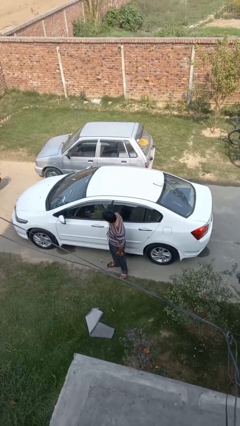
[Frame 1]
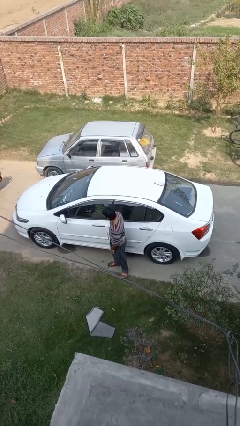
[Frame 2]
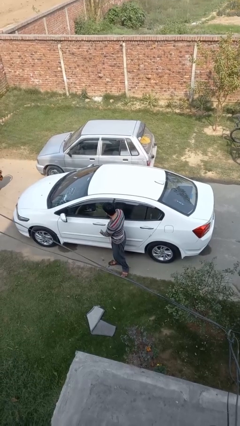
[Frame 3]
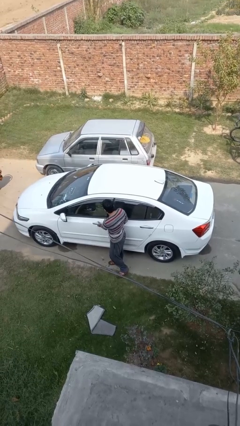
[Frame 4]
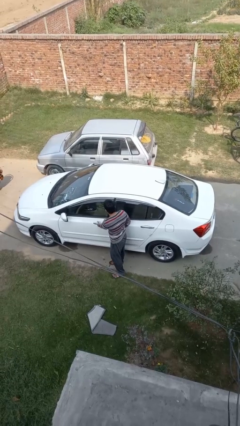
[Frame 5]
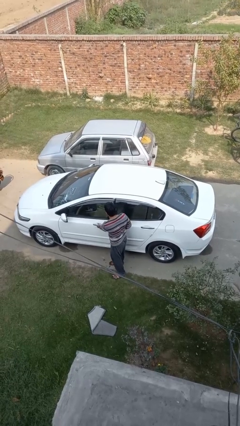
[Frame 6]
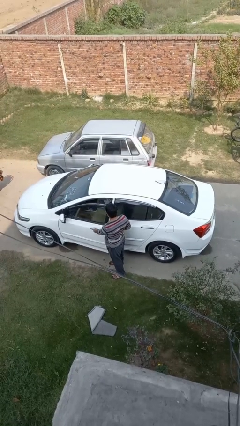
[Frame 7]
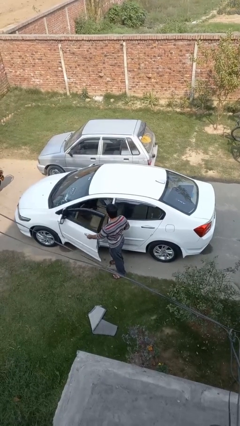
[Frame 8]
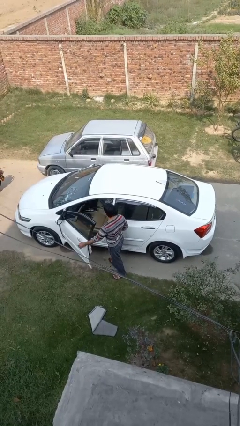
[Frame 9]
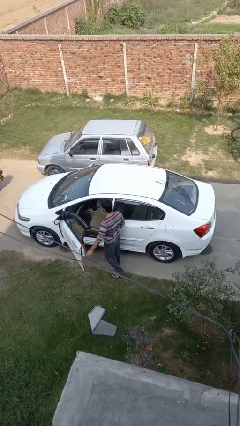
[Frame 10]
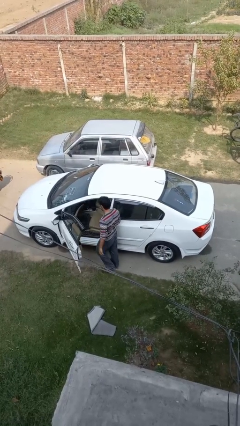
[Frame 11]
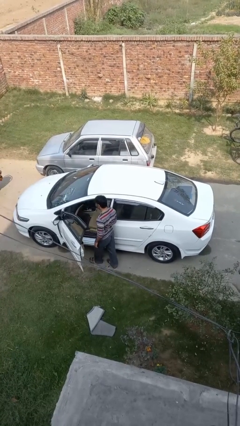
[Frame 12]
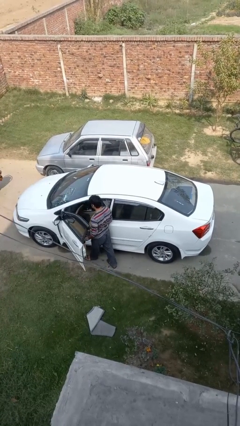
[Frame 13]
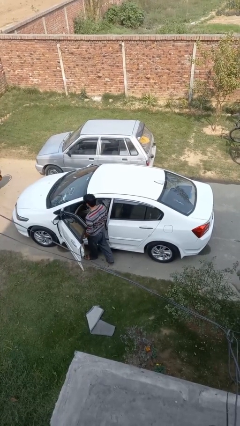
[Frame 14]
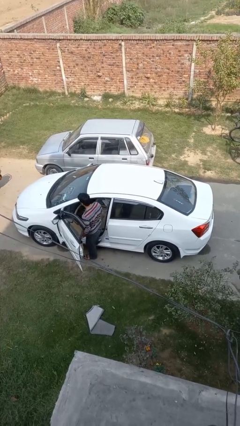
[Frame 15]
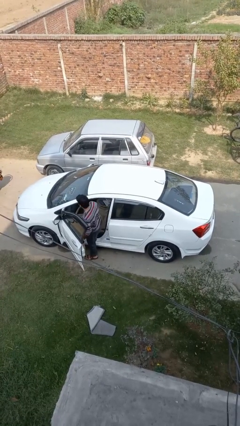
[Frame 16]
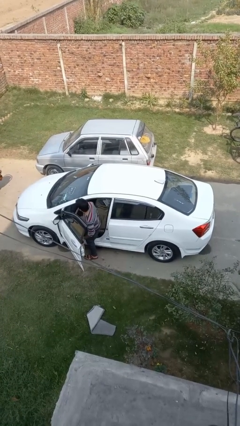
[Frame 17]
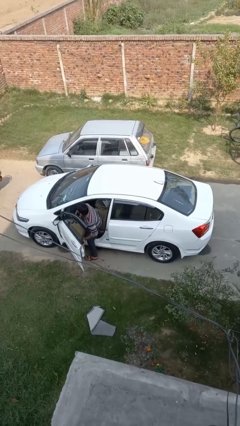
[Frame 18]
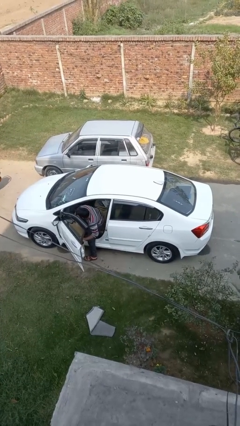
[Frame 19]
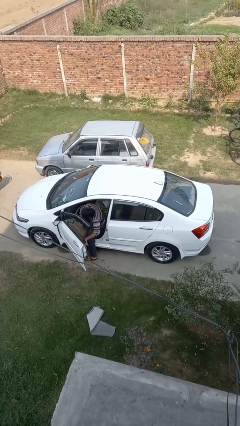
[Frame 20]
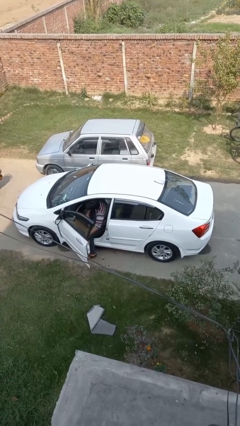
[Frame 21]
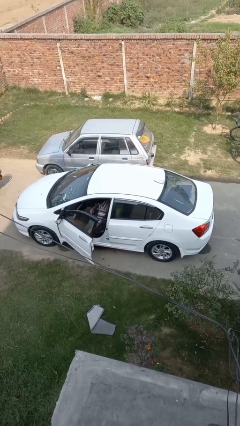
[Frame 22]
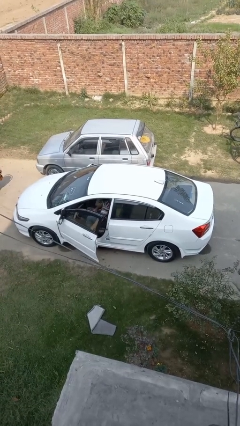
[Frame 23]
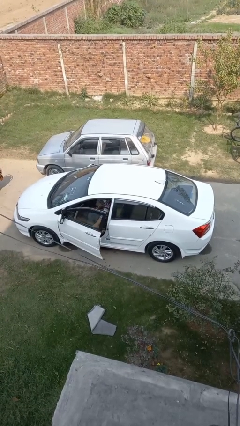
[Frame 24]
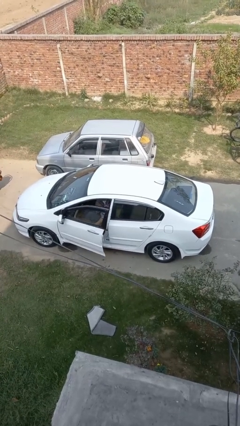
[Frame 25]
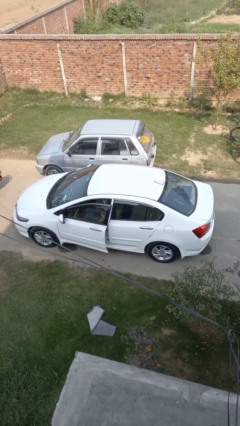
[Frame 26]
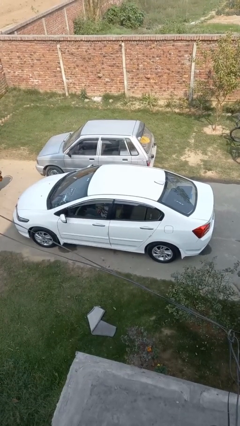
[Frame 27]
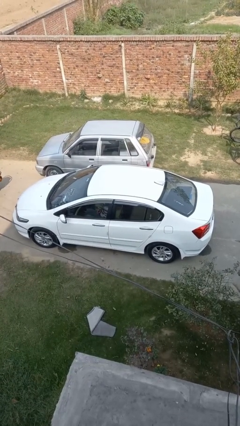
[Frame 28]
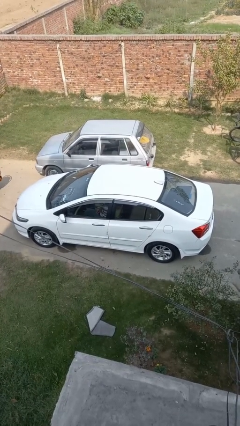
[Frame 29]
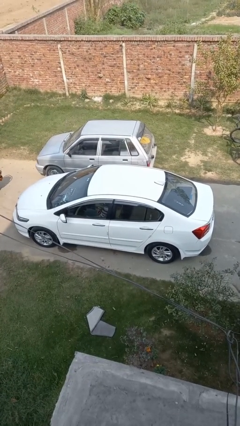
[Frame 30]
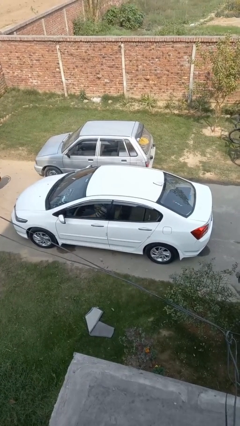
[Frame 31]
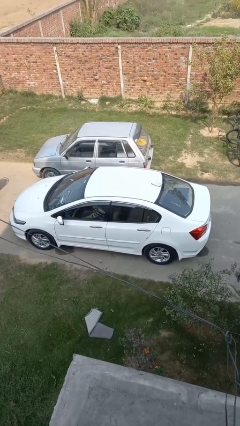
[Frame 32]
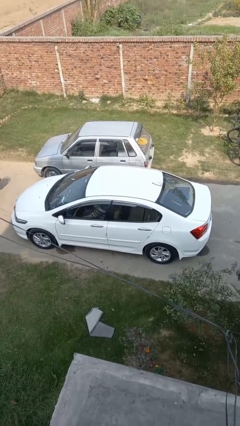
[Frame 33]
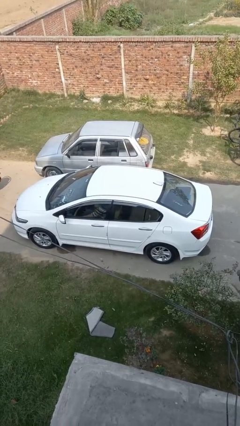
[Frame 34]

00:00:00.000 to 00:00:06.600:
car picks up person

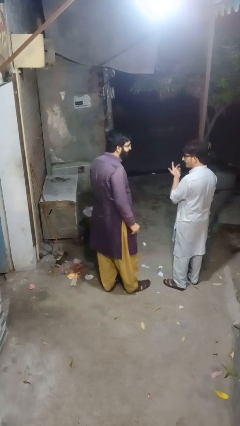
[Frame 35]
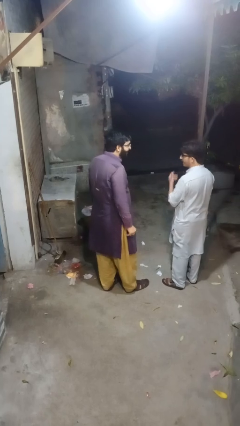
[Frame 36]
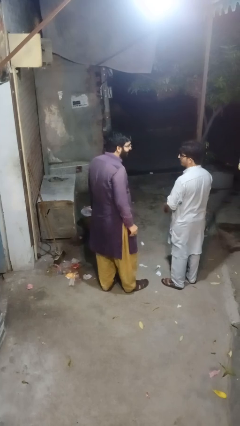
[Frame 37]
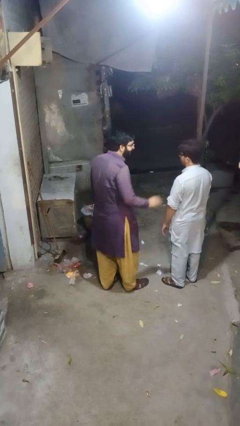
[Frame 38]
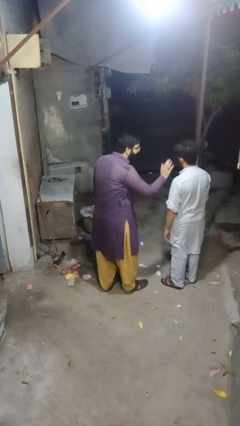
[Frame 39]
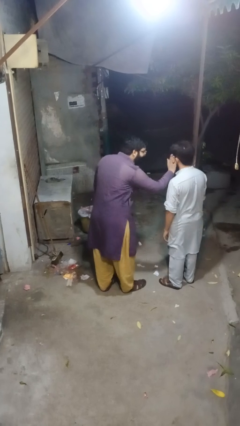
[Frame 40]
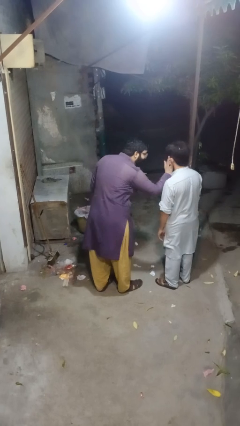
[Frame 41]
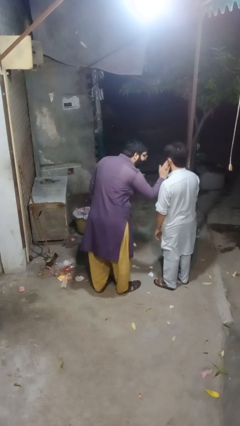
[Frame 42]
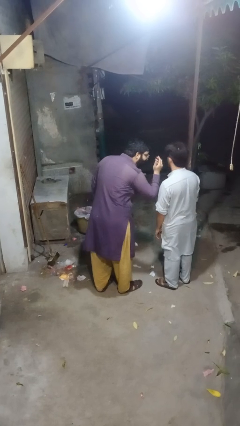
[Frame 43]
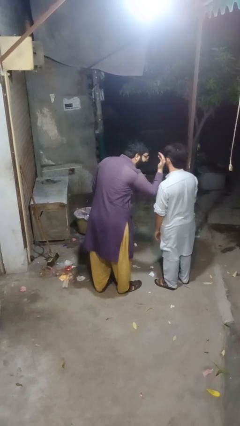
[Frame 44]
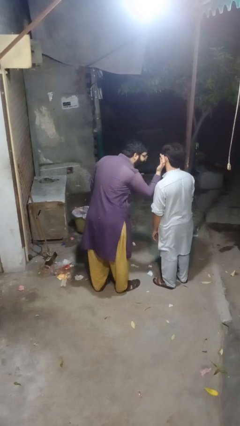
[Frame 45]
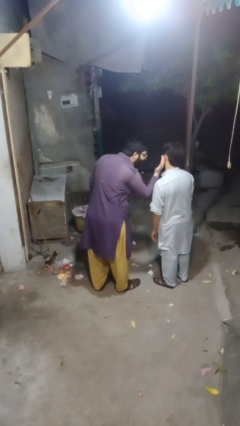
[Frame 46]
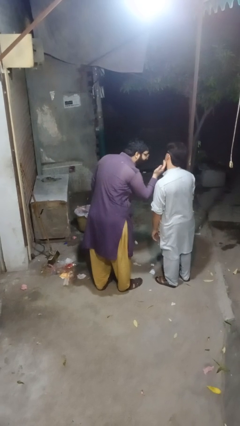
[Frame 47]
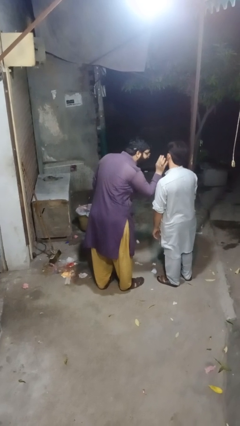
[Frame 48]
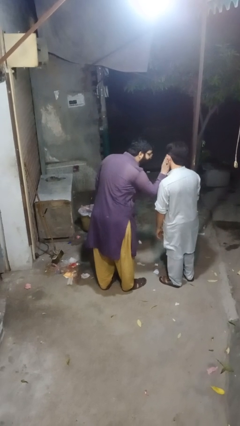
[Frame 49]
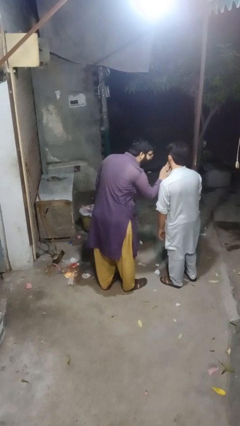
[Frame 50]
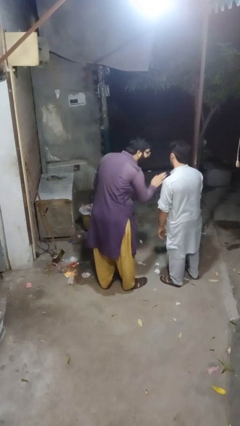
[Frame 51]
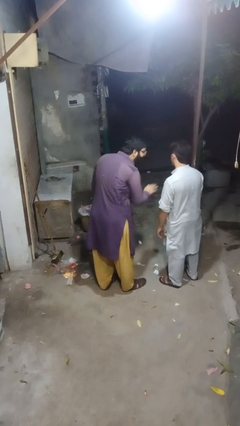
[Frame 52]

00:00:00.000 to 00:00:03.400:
person touches face of person

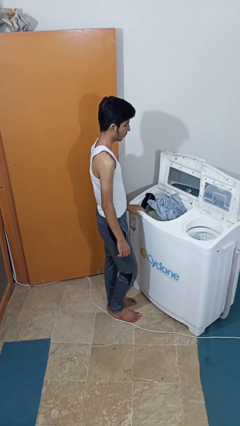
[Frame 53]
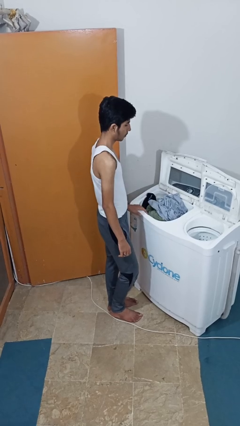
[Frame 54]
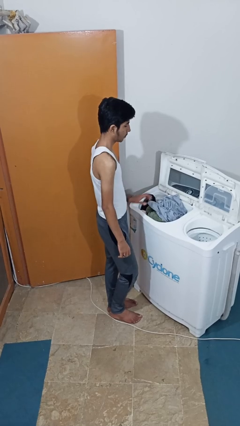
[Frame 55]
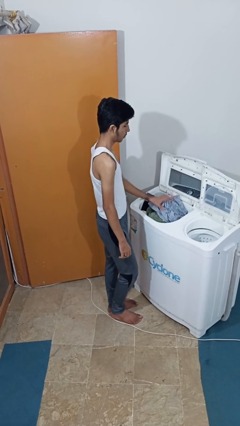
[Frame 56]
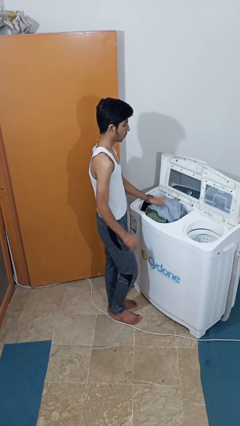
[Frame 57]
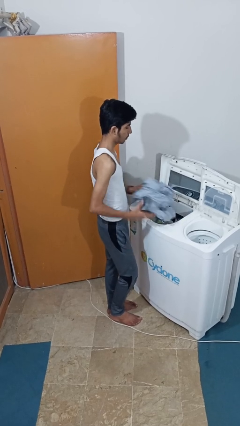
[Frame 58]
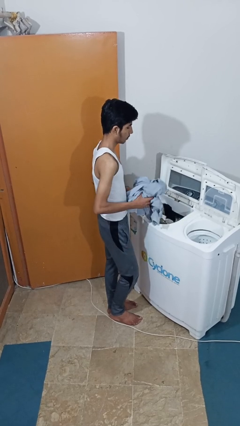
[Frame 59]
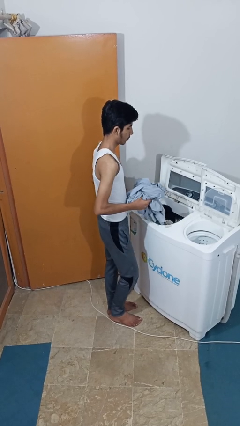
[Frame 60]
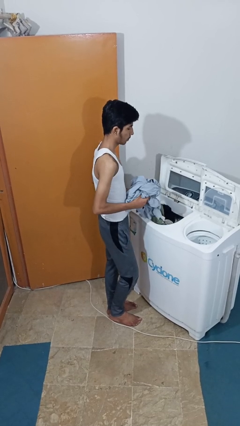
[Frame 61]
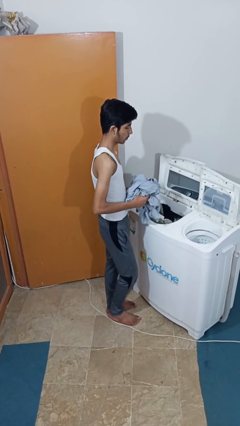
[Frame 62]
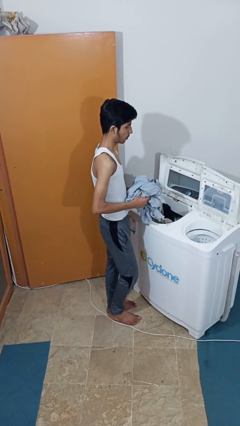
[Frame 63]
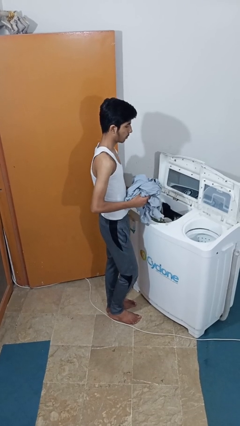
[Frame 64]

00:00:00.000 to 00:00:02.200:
person unloads clotheswasher

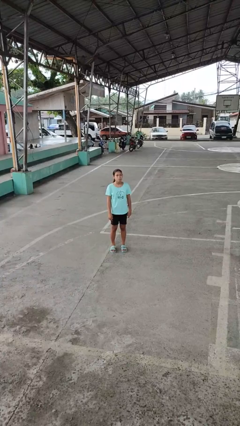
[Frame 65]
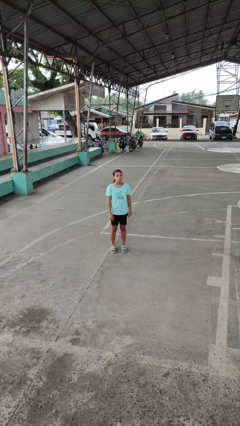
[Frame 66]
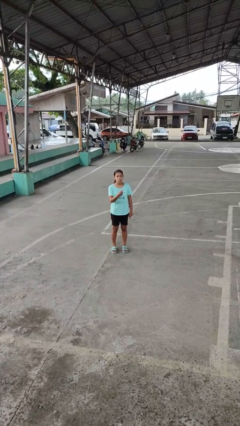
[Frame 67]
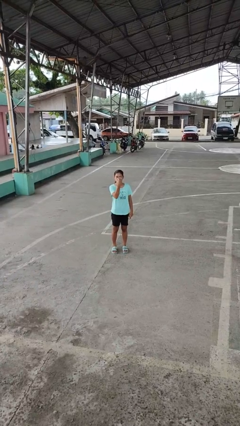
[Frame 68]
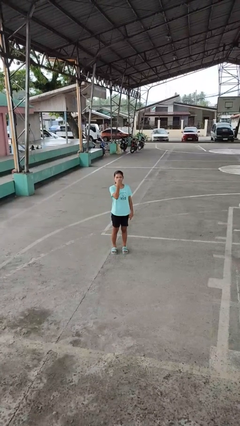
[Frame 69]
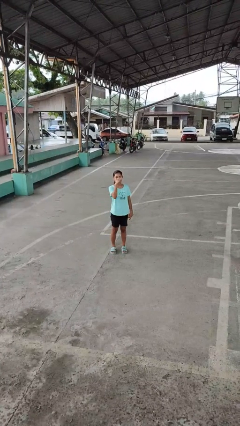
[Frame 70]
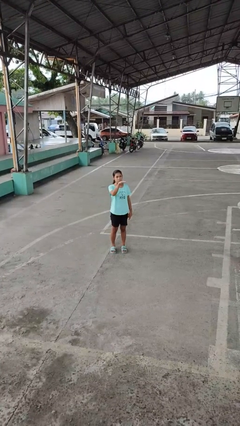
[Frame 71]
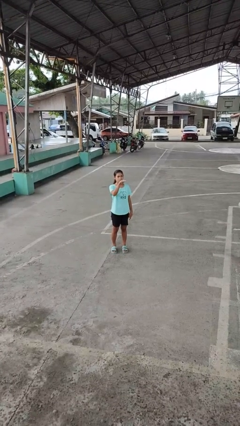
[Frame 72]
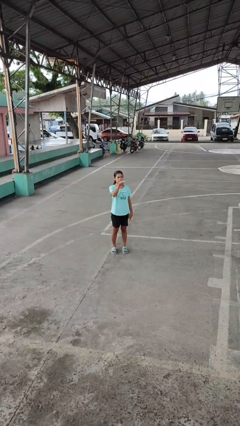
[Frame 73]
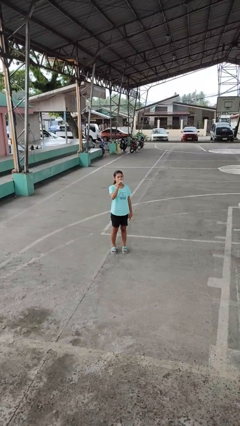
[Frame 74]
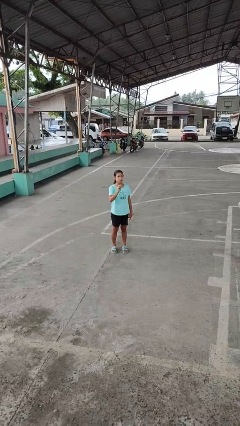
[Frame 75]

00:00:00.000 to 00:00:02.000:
person gestures watch closely

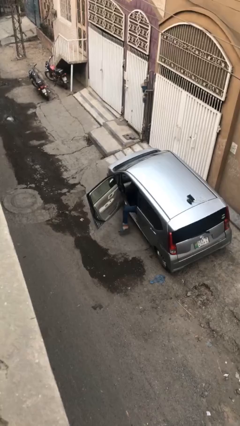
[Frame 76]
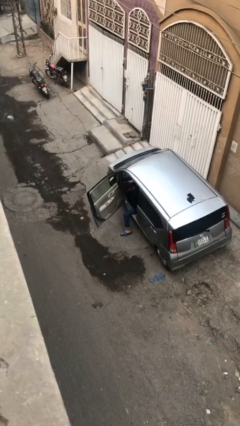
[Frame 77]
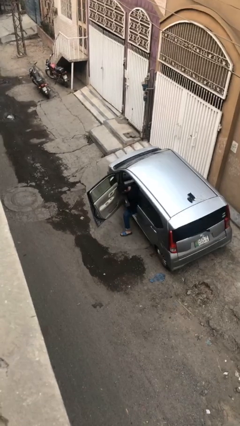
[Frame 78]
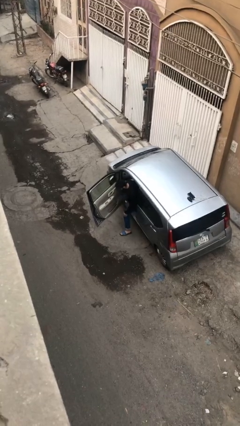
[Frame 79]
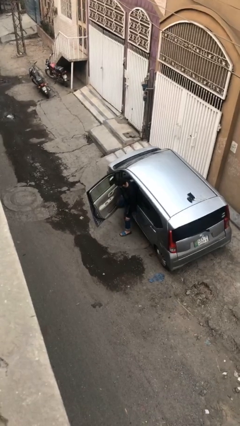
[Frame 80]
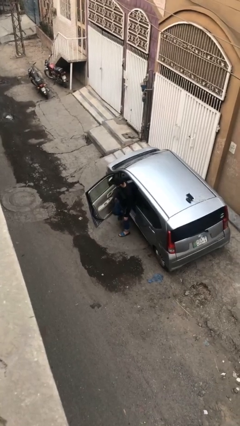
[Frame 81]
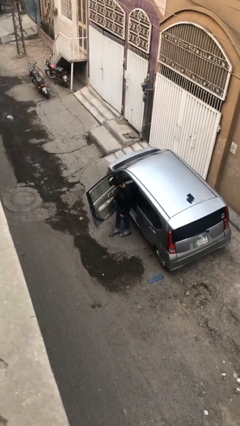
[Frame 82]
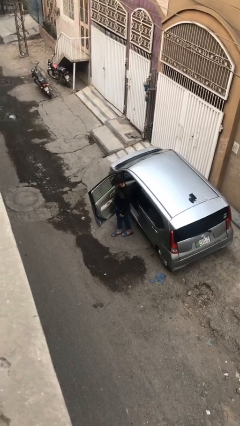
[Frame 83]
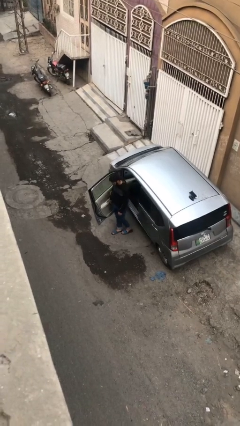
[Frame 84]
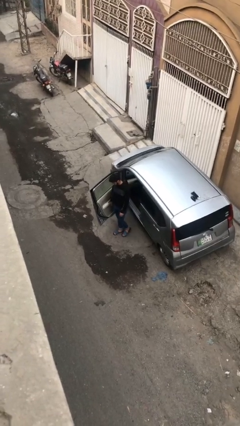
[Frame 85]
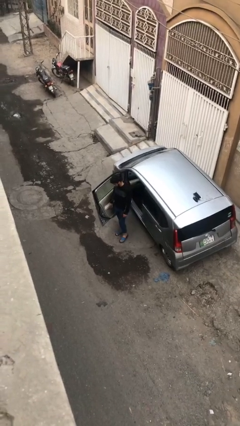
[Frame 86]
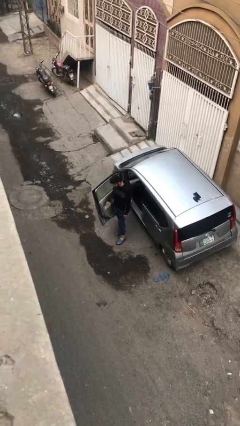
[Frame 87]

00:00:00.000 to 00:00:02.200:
person exits car

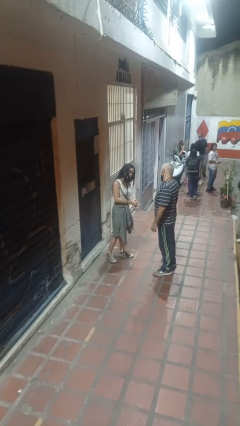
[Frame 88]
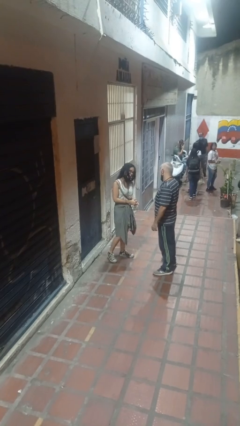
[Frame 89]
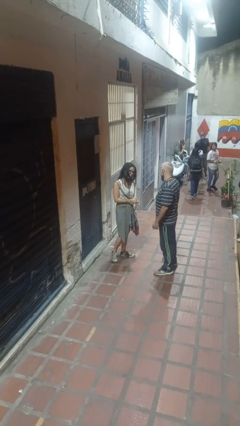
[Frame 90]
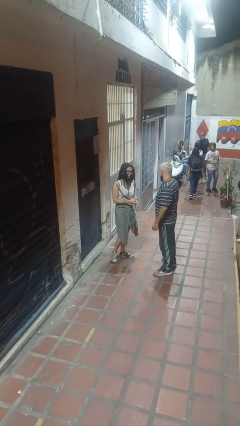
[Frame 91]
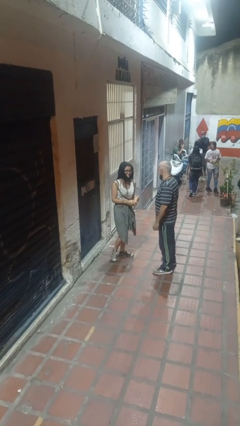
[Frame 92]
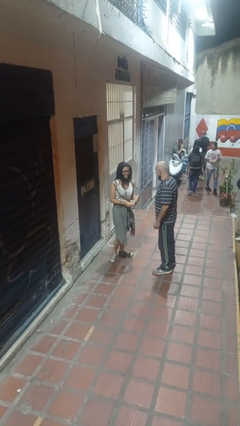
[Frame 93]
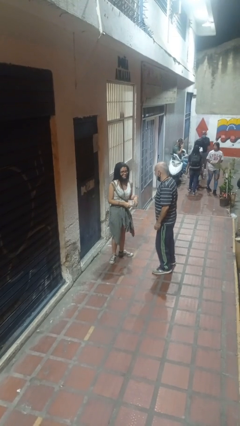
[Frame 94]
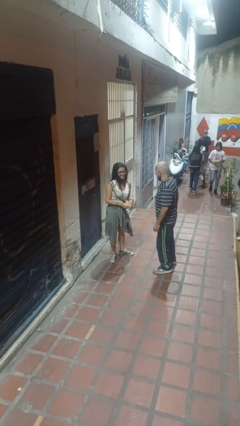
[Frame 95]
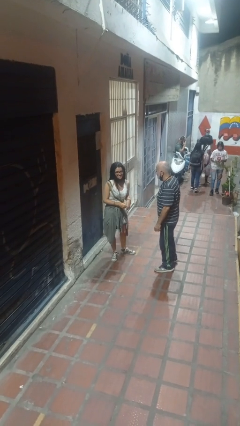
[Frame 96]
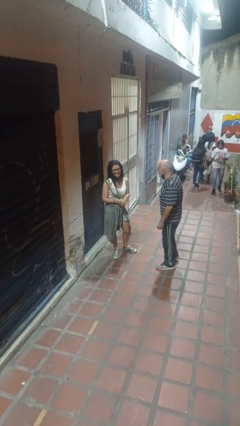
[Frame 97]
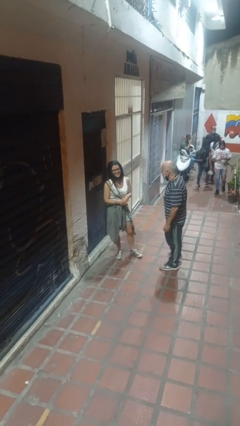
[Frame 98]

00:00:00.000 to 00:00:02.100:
person laughs with person
